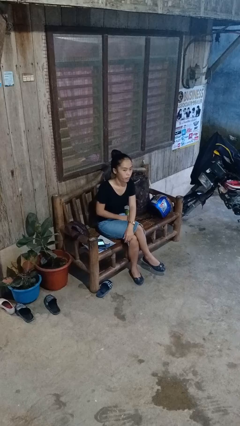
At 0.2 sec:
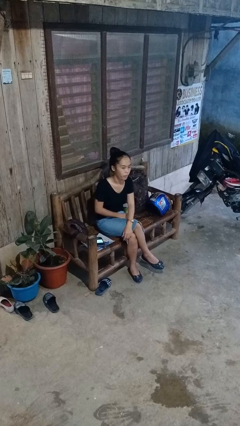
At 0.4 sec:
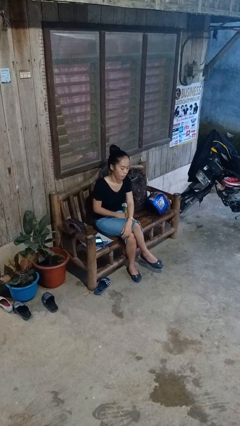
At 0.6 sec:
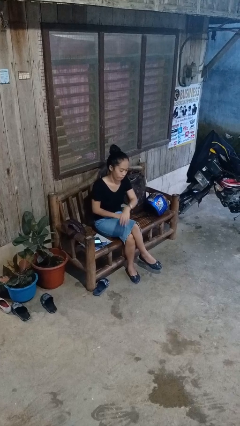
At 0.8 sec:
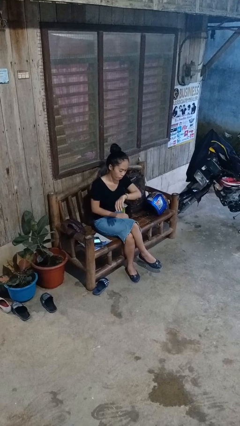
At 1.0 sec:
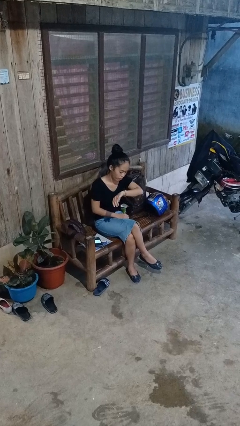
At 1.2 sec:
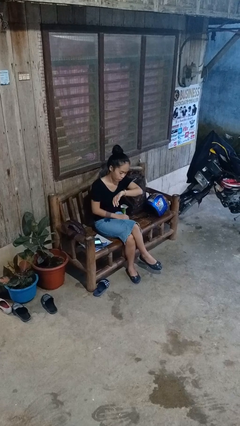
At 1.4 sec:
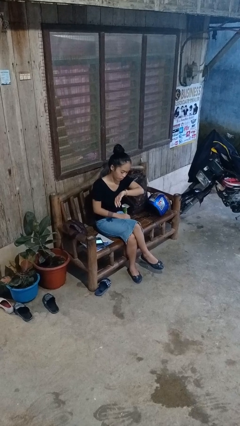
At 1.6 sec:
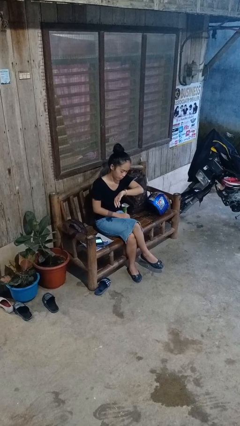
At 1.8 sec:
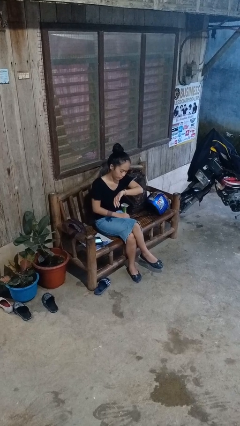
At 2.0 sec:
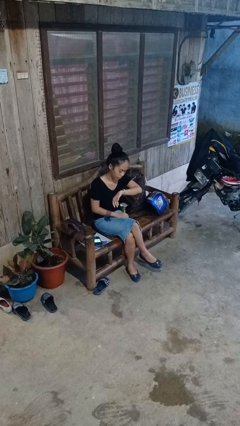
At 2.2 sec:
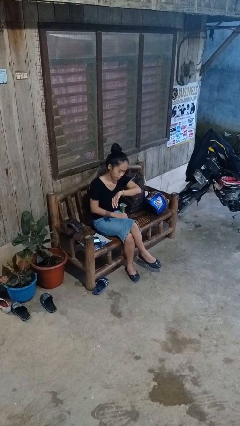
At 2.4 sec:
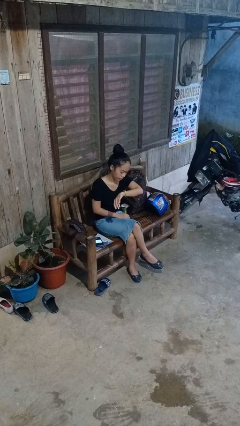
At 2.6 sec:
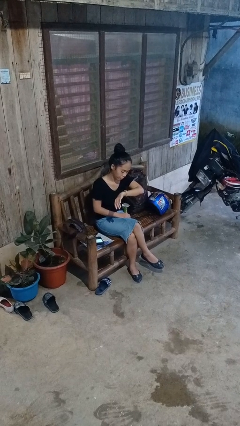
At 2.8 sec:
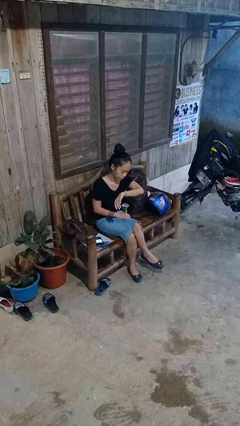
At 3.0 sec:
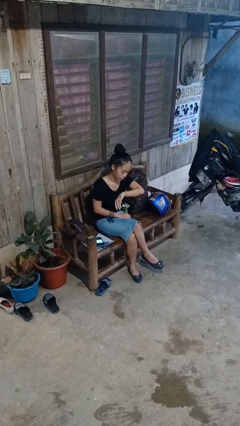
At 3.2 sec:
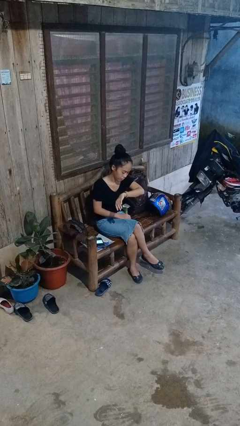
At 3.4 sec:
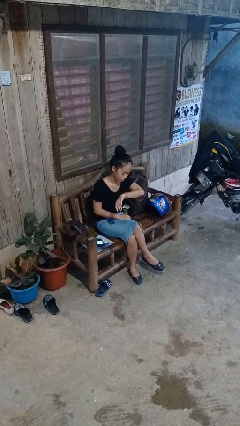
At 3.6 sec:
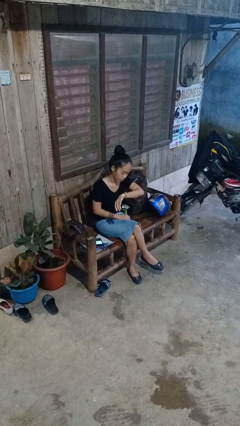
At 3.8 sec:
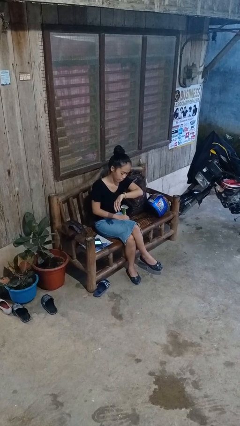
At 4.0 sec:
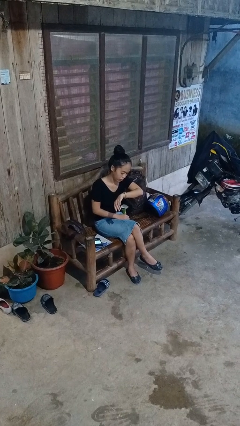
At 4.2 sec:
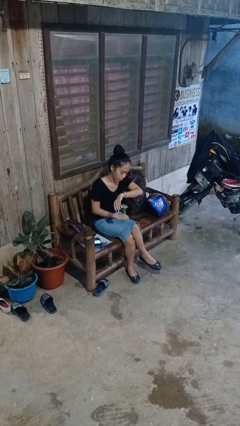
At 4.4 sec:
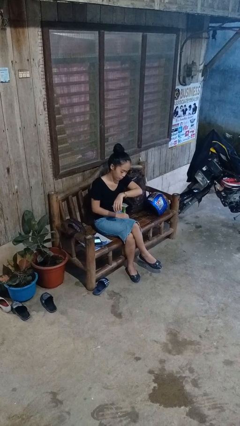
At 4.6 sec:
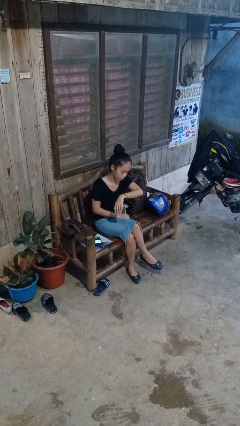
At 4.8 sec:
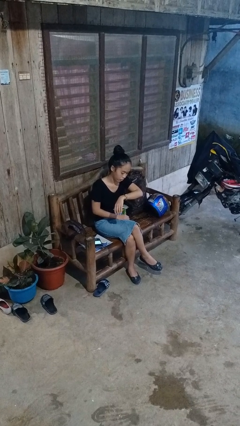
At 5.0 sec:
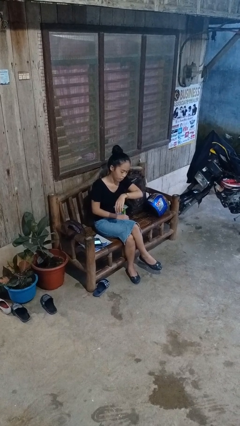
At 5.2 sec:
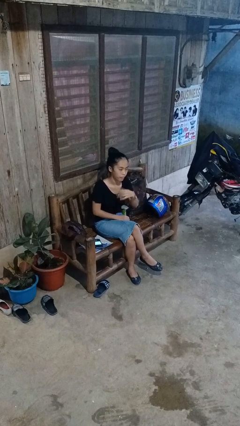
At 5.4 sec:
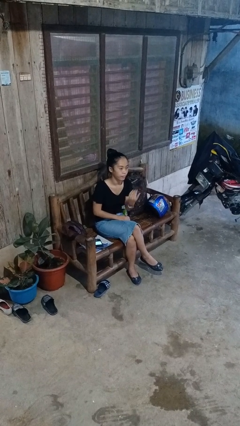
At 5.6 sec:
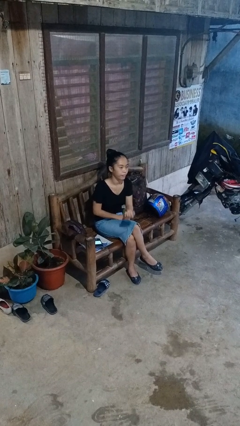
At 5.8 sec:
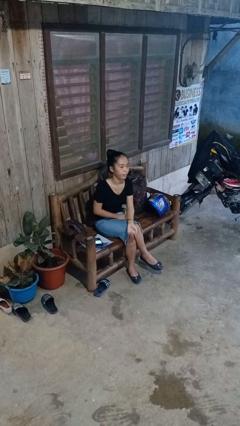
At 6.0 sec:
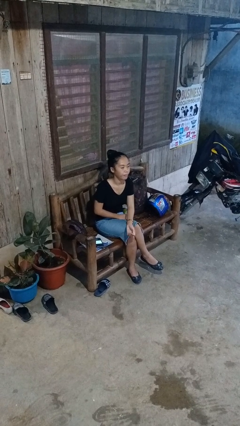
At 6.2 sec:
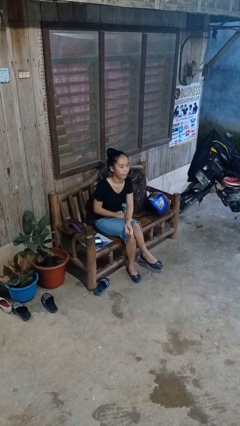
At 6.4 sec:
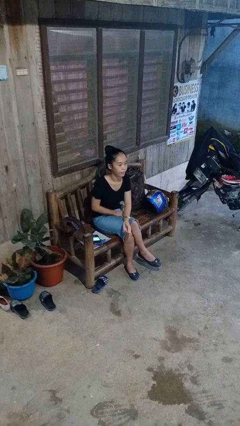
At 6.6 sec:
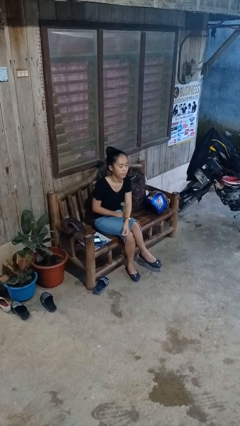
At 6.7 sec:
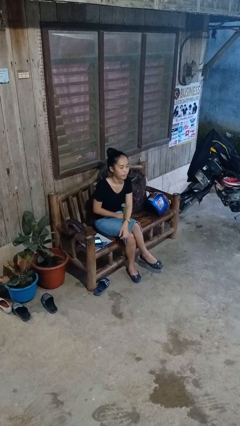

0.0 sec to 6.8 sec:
person looks at wristwatch

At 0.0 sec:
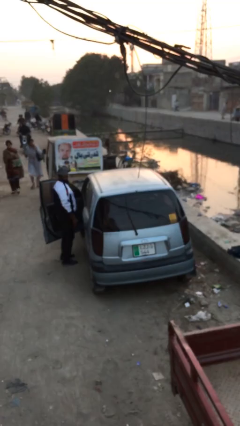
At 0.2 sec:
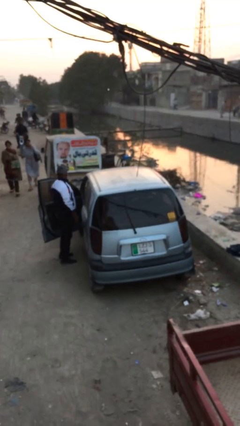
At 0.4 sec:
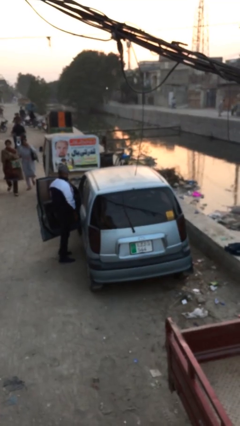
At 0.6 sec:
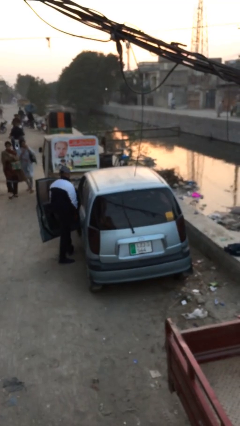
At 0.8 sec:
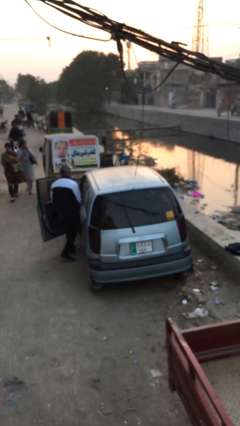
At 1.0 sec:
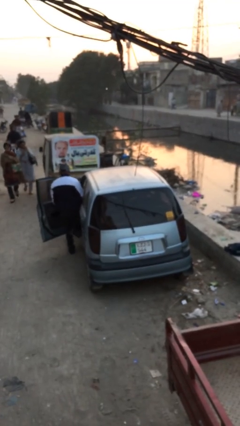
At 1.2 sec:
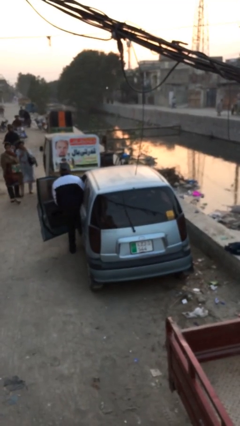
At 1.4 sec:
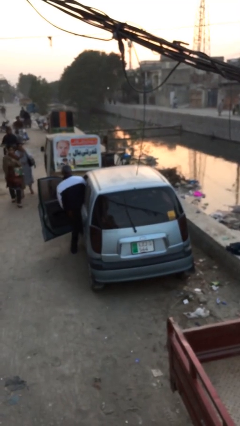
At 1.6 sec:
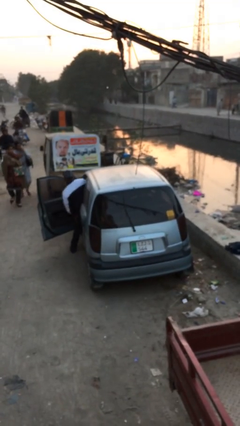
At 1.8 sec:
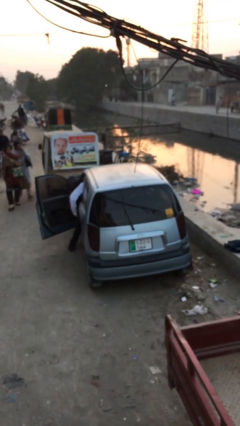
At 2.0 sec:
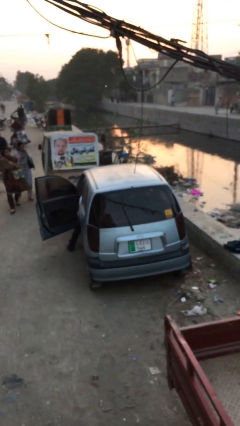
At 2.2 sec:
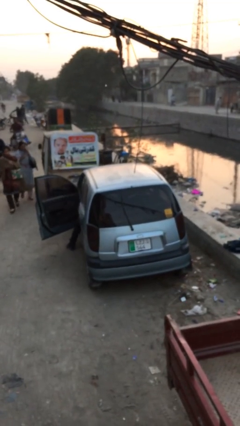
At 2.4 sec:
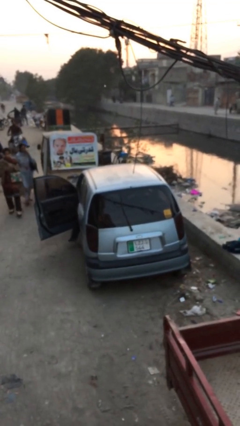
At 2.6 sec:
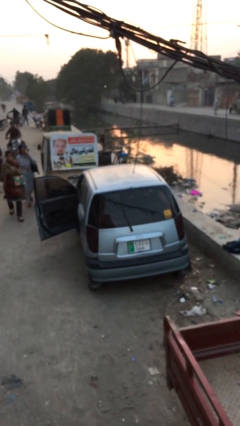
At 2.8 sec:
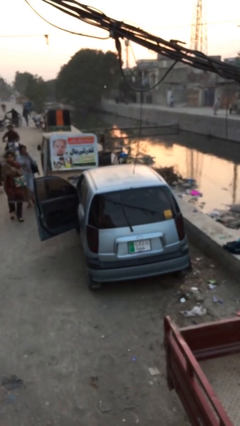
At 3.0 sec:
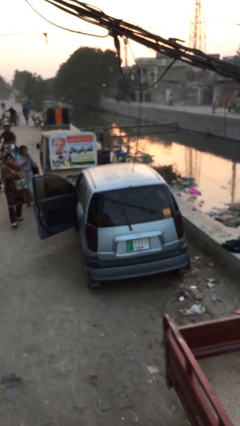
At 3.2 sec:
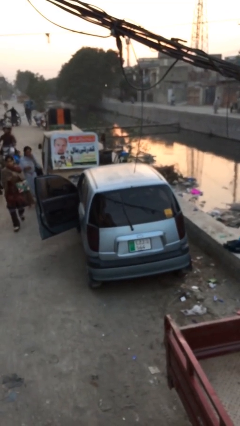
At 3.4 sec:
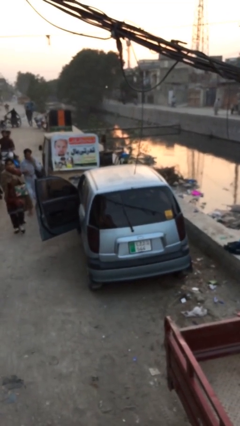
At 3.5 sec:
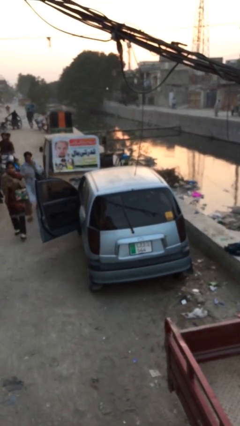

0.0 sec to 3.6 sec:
person enters car

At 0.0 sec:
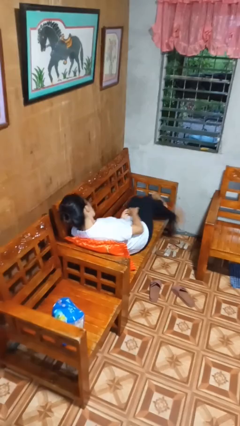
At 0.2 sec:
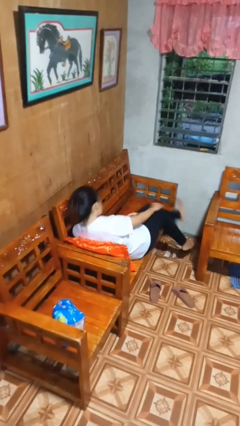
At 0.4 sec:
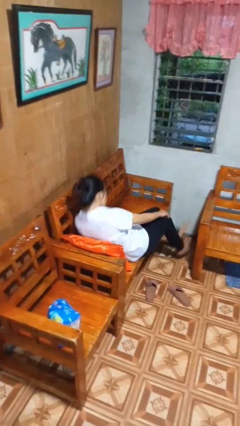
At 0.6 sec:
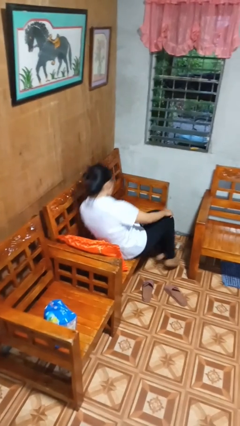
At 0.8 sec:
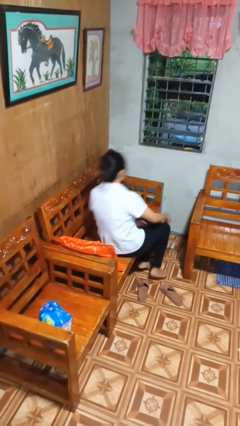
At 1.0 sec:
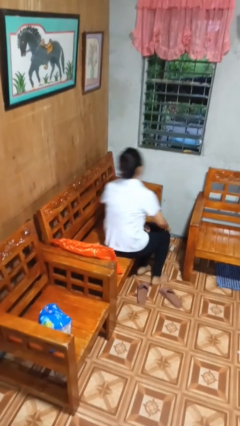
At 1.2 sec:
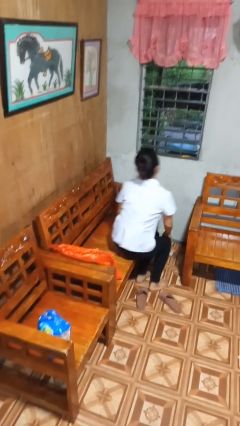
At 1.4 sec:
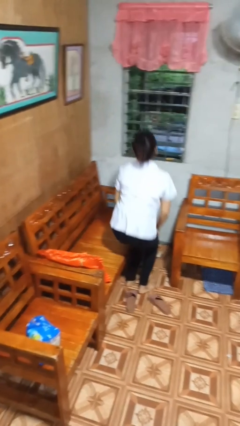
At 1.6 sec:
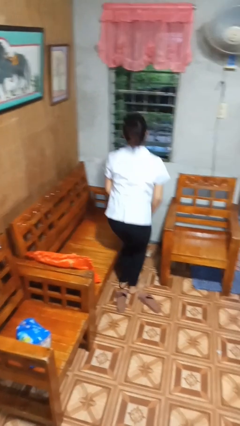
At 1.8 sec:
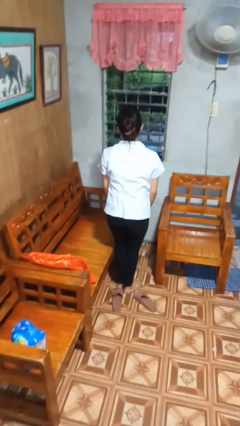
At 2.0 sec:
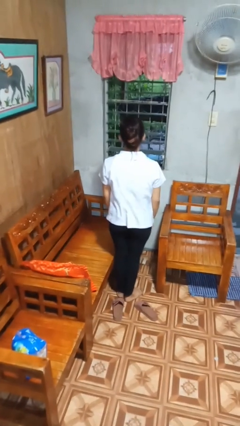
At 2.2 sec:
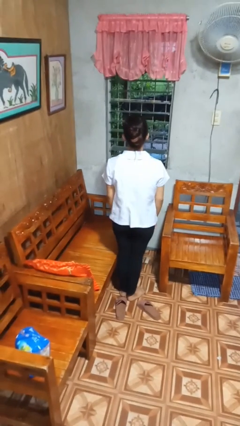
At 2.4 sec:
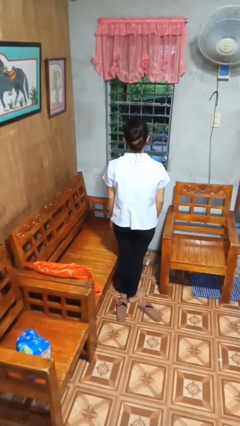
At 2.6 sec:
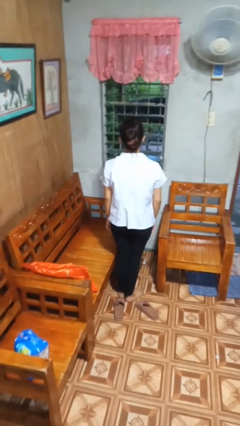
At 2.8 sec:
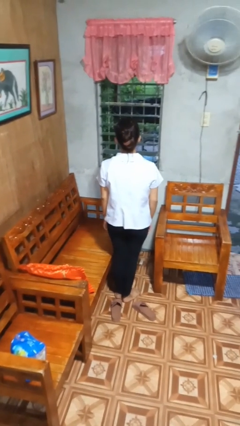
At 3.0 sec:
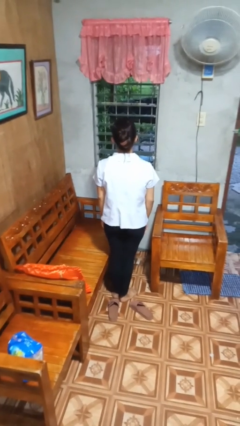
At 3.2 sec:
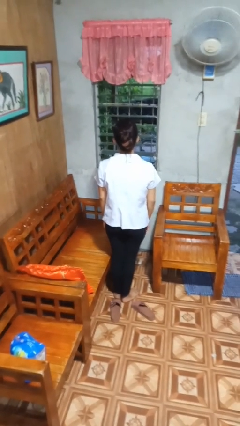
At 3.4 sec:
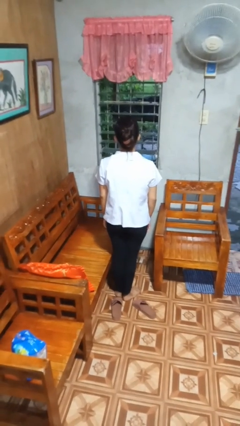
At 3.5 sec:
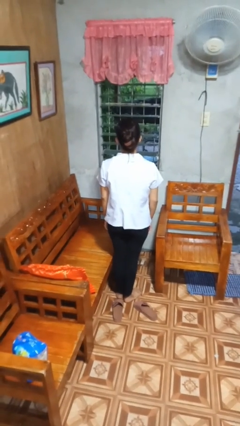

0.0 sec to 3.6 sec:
person stands up

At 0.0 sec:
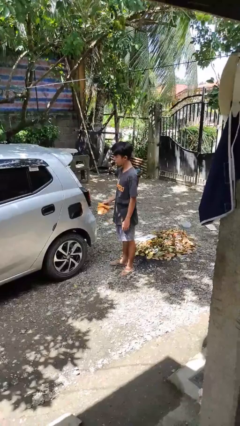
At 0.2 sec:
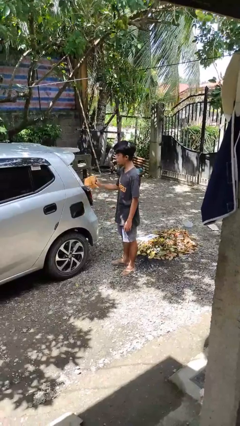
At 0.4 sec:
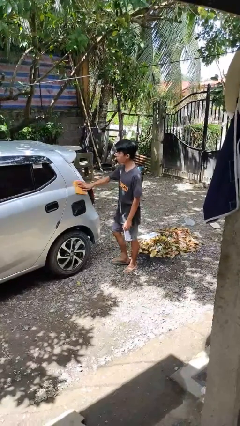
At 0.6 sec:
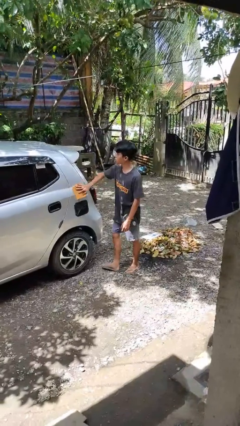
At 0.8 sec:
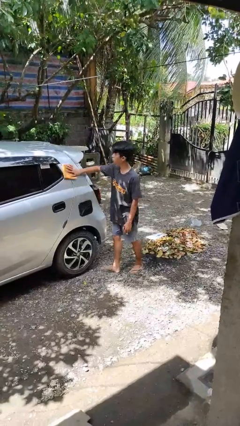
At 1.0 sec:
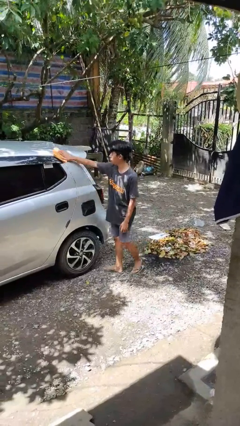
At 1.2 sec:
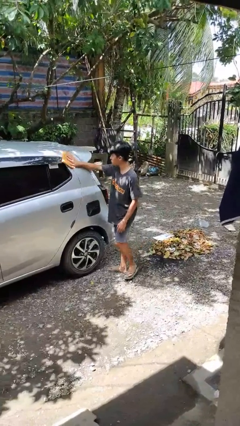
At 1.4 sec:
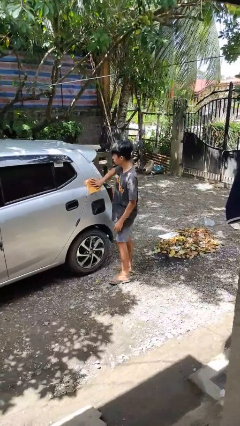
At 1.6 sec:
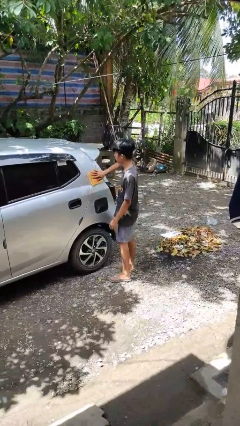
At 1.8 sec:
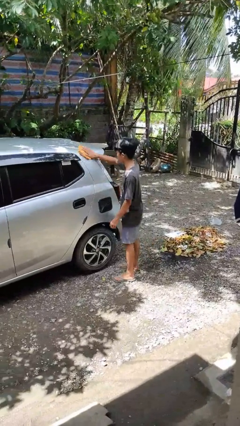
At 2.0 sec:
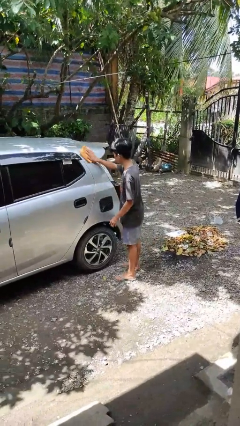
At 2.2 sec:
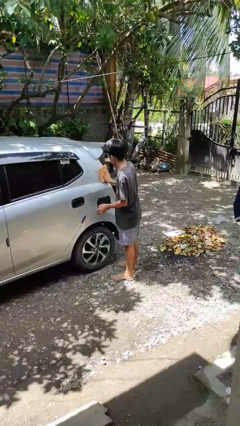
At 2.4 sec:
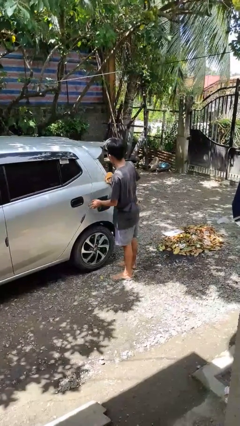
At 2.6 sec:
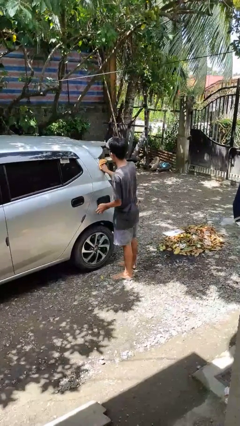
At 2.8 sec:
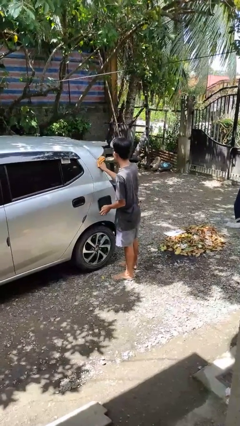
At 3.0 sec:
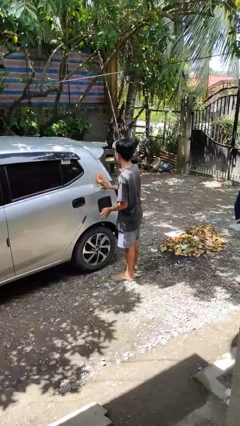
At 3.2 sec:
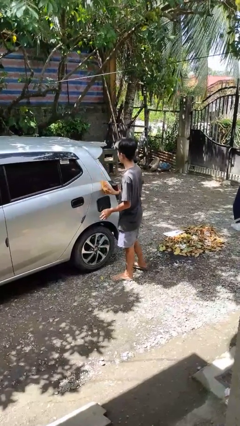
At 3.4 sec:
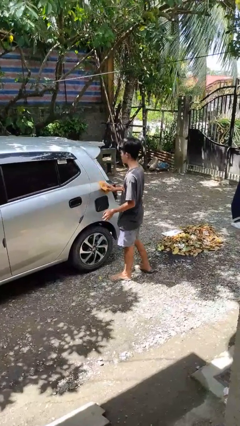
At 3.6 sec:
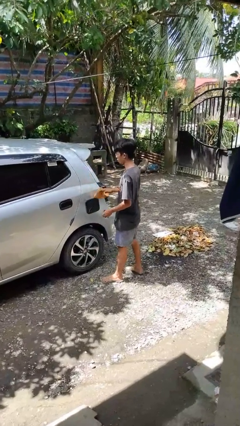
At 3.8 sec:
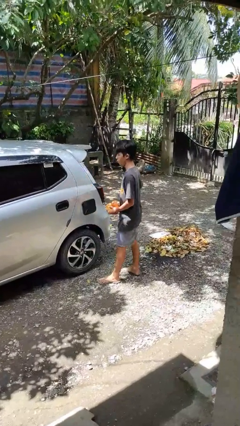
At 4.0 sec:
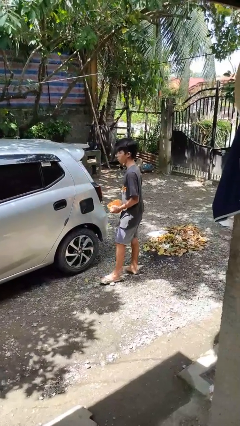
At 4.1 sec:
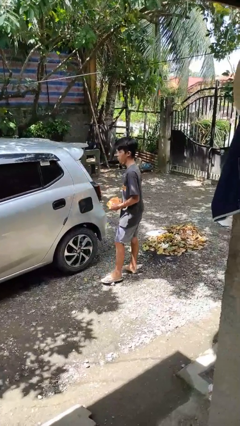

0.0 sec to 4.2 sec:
person polishes car with rag
